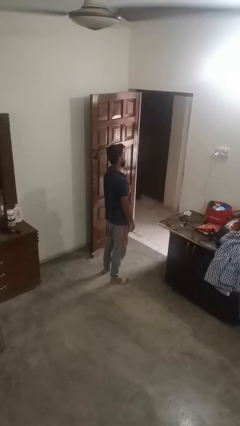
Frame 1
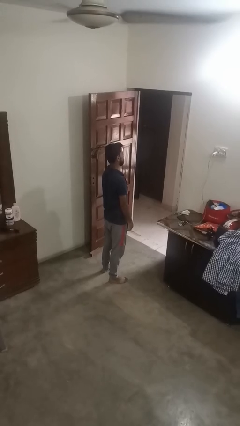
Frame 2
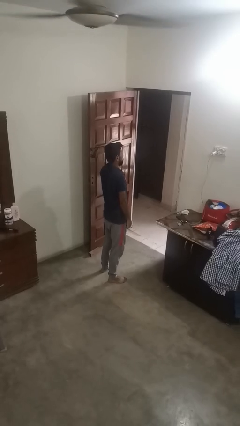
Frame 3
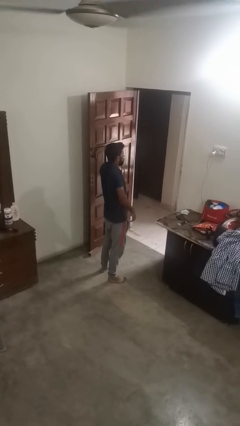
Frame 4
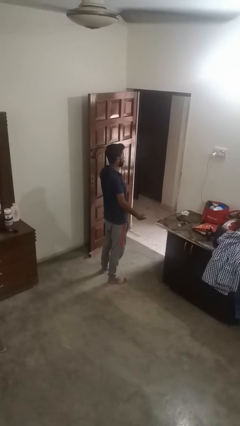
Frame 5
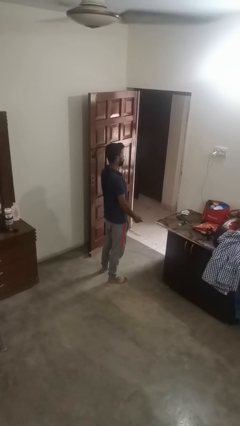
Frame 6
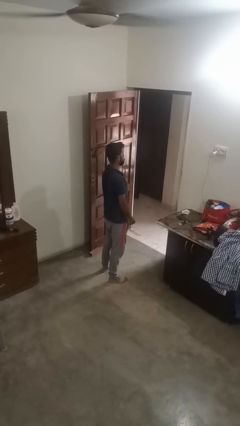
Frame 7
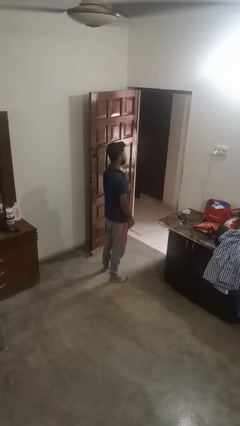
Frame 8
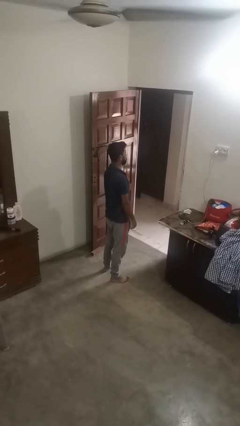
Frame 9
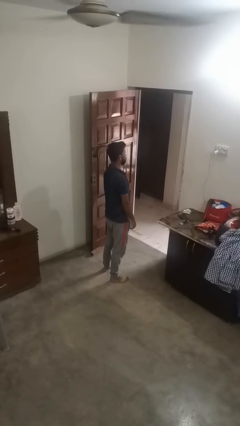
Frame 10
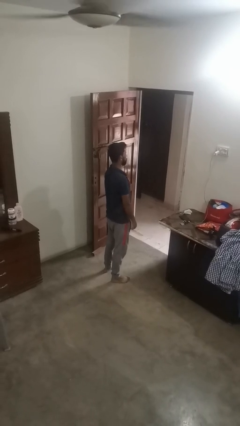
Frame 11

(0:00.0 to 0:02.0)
person shrugs

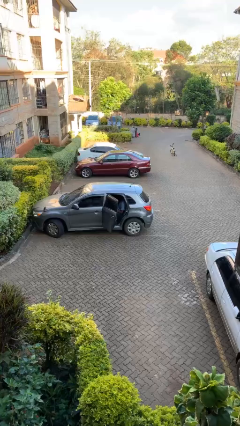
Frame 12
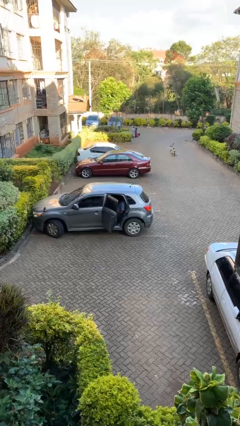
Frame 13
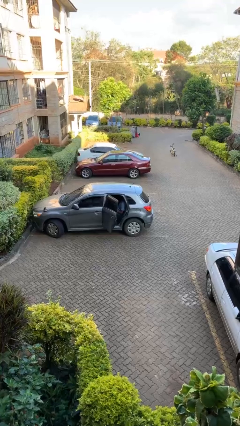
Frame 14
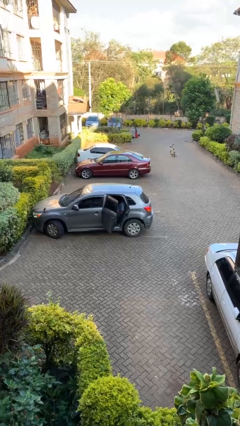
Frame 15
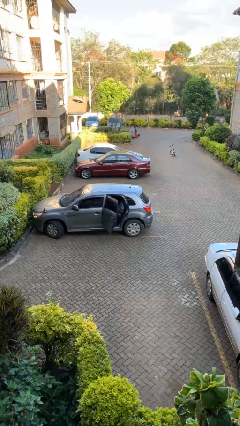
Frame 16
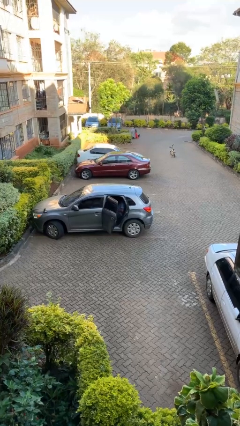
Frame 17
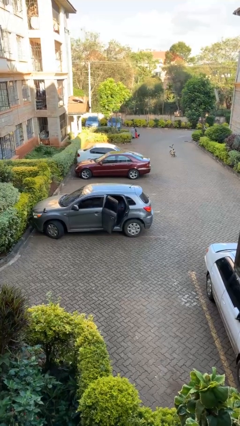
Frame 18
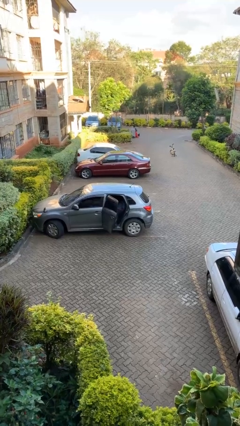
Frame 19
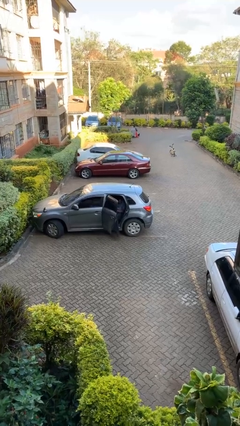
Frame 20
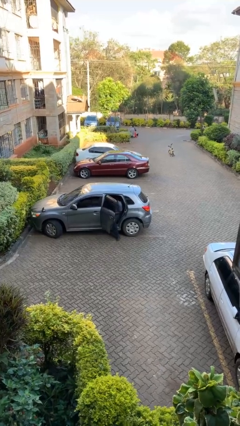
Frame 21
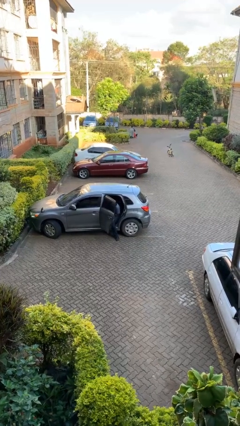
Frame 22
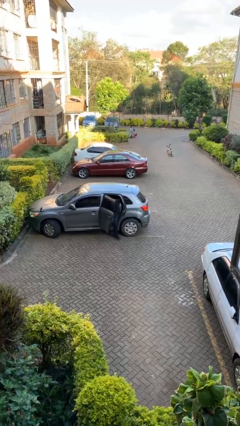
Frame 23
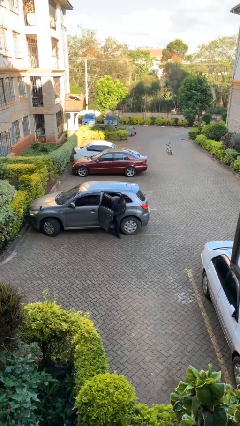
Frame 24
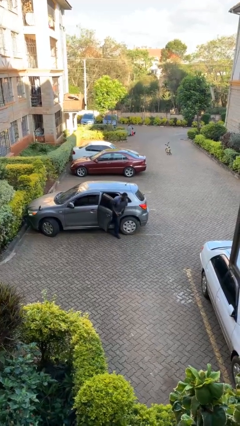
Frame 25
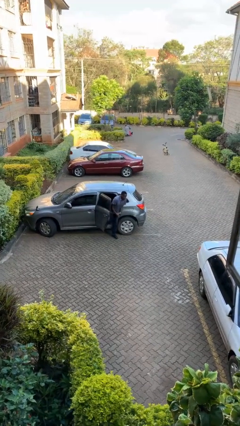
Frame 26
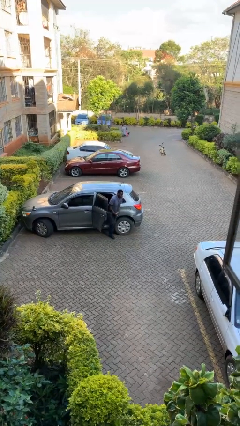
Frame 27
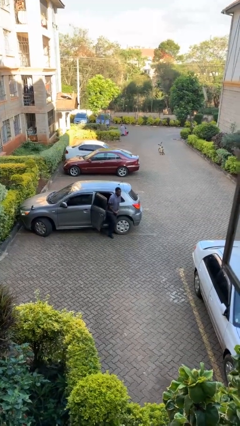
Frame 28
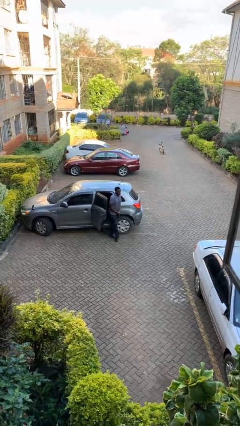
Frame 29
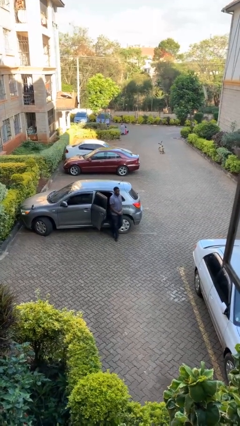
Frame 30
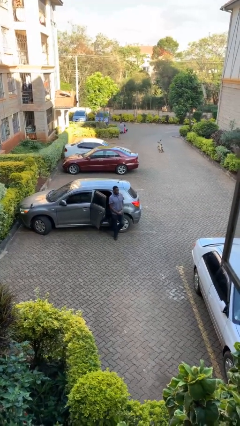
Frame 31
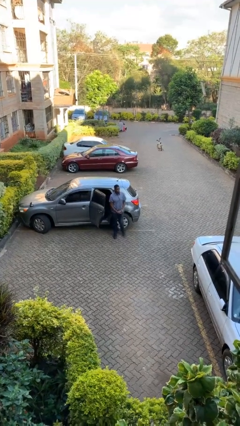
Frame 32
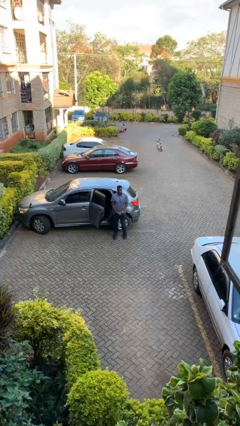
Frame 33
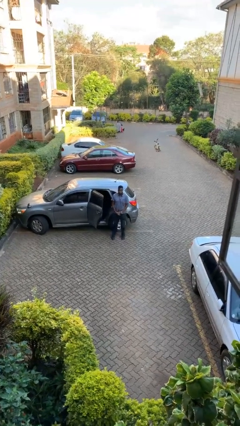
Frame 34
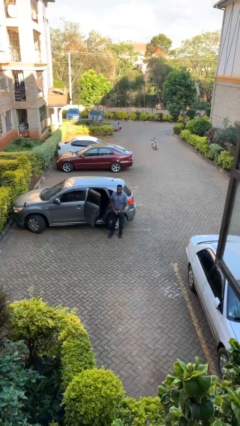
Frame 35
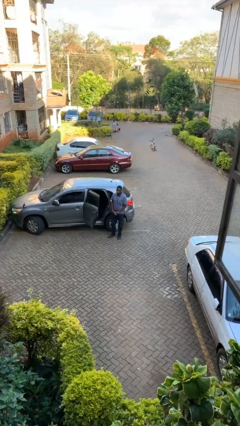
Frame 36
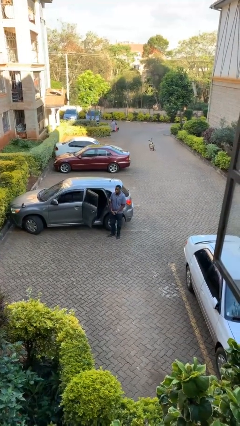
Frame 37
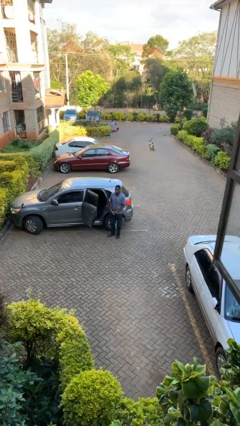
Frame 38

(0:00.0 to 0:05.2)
person exits car

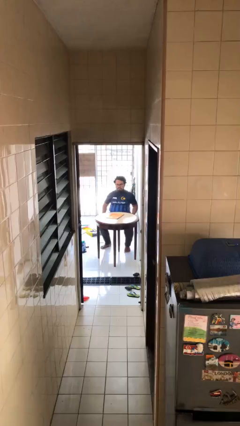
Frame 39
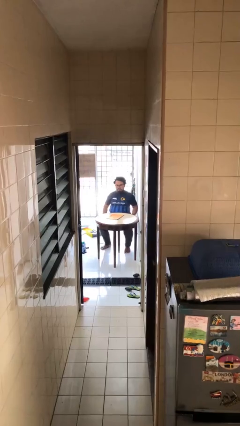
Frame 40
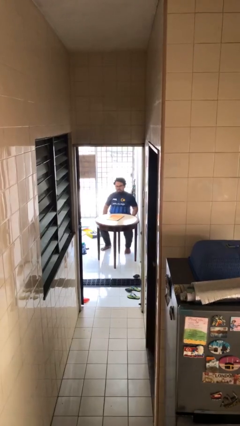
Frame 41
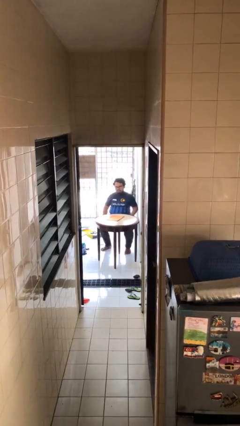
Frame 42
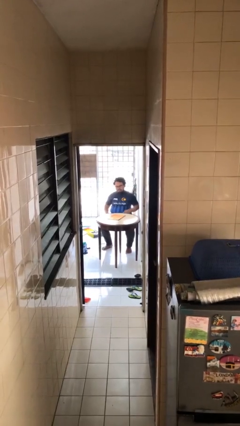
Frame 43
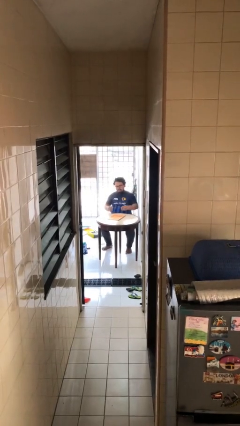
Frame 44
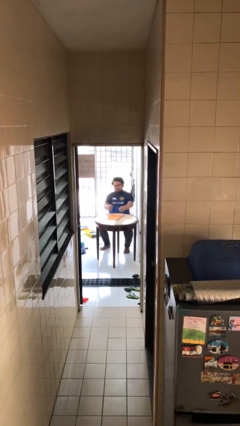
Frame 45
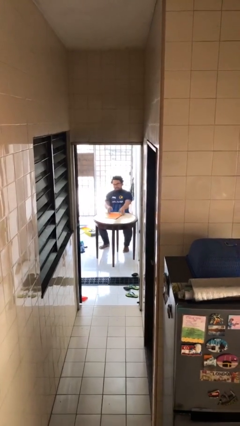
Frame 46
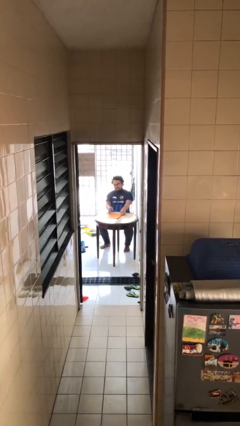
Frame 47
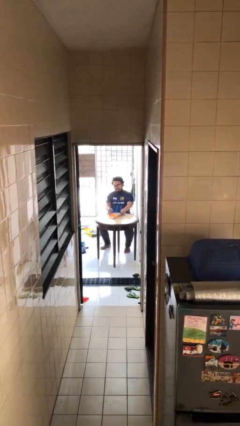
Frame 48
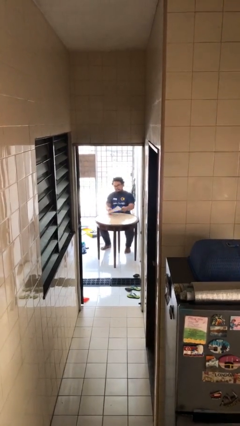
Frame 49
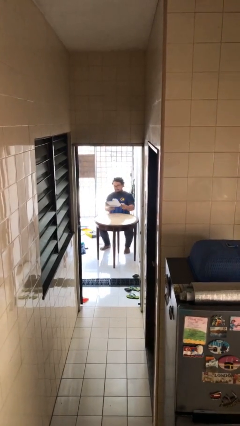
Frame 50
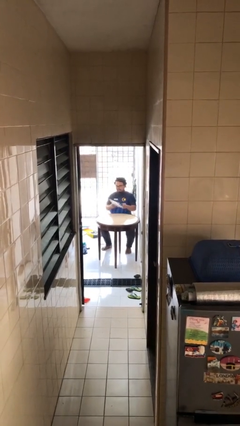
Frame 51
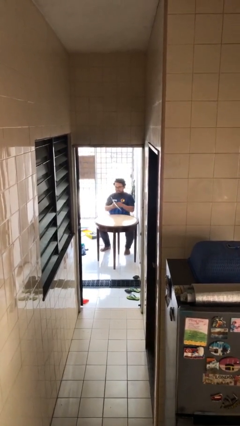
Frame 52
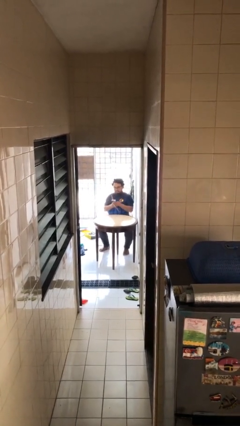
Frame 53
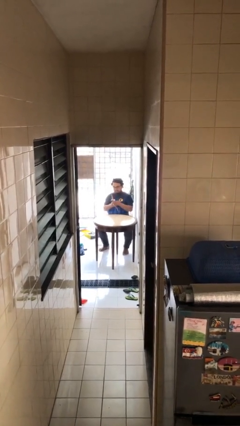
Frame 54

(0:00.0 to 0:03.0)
person picks up object from table

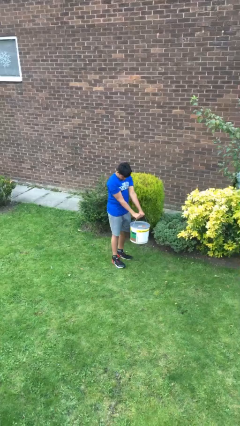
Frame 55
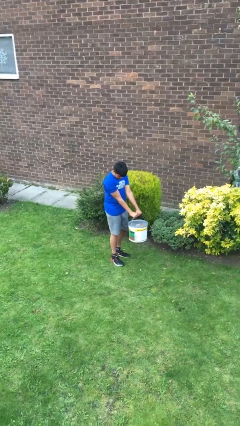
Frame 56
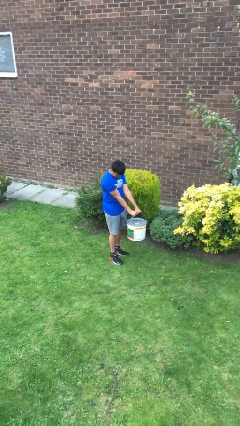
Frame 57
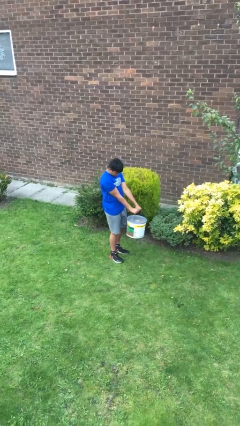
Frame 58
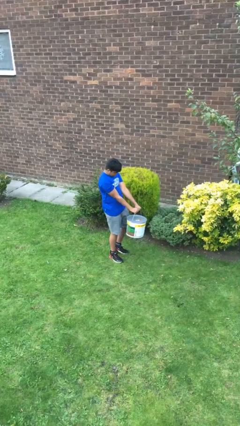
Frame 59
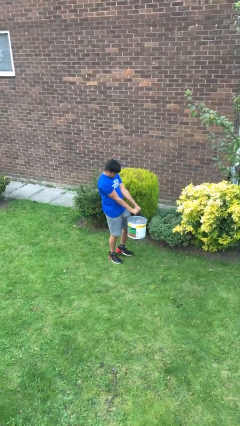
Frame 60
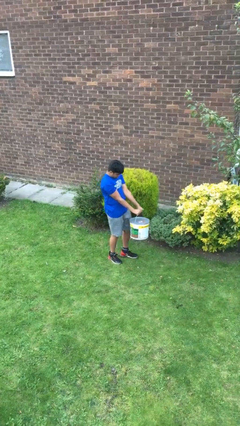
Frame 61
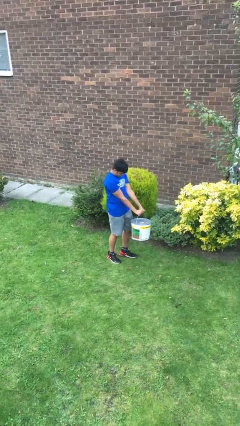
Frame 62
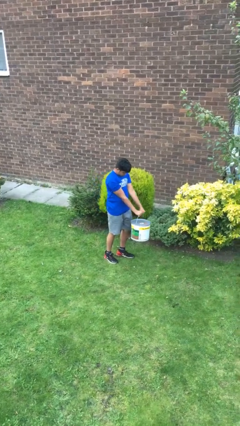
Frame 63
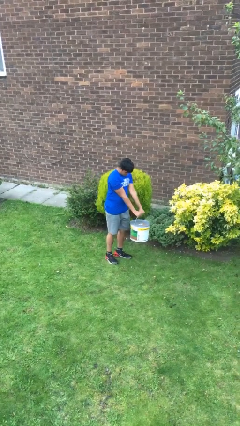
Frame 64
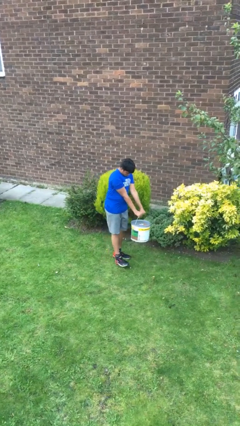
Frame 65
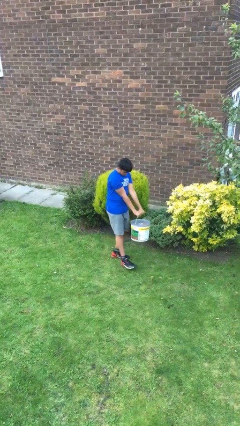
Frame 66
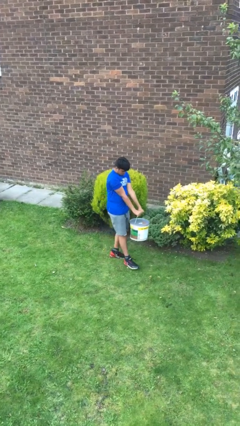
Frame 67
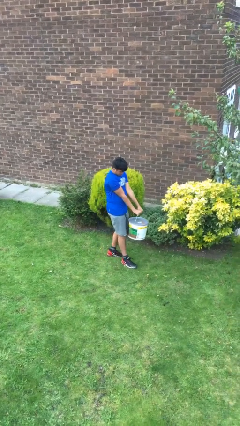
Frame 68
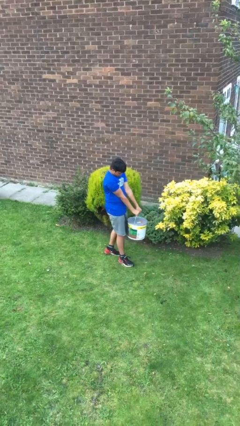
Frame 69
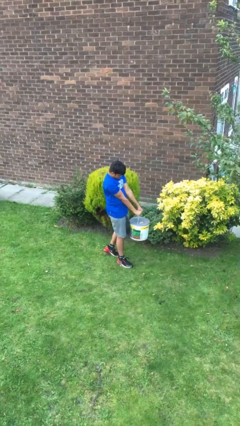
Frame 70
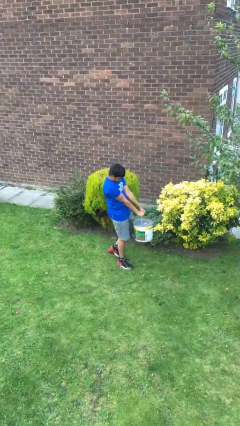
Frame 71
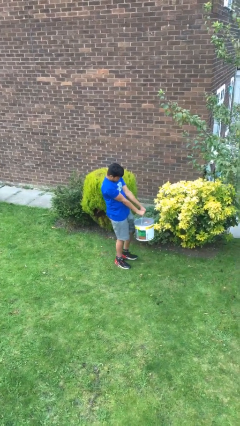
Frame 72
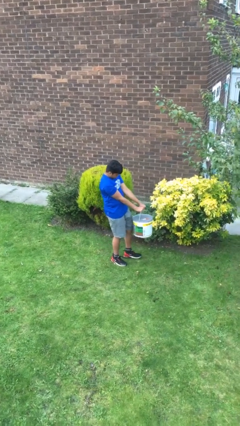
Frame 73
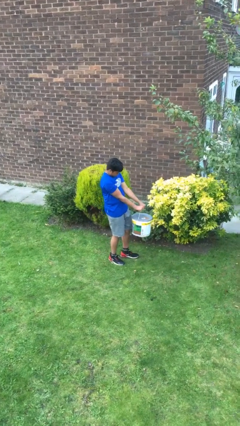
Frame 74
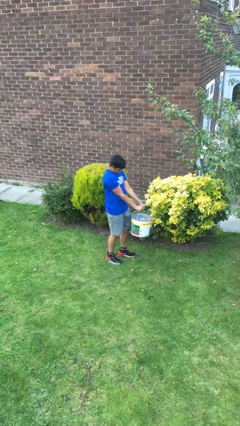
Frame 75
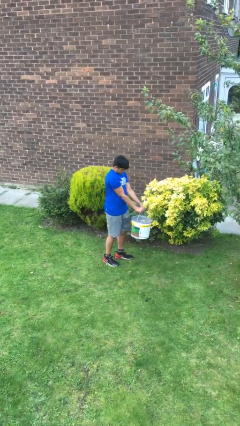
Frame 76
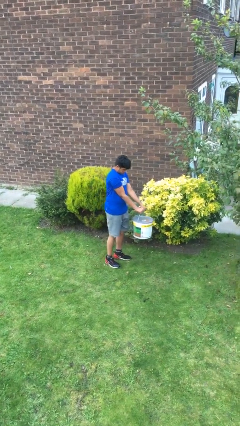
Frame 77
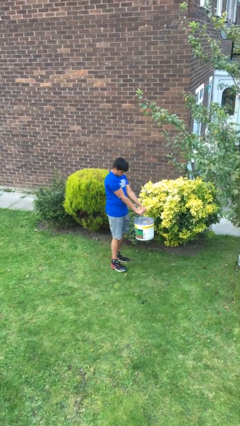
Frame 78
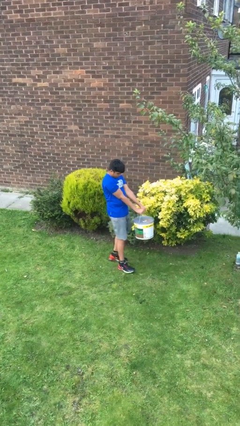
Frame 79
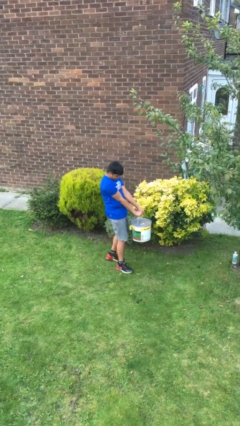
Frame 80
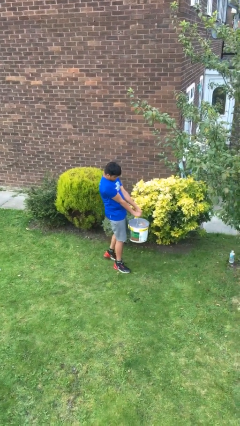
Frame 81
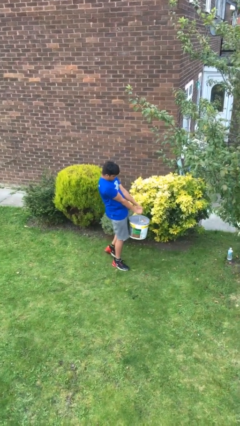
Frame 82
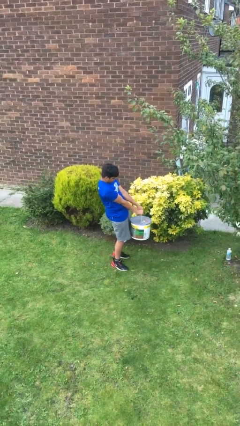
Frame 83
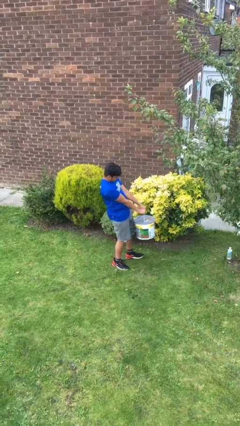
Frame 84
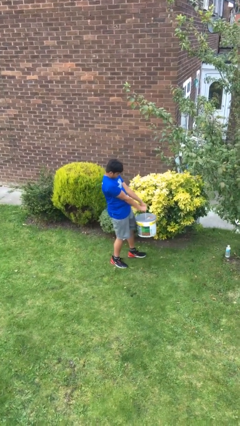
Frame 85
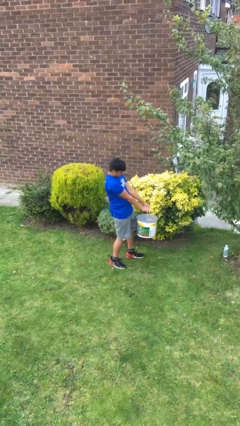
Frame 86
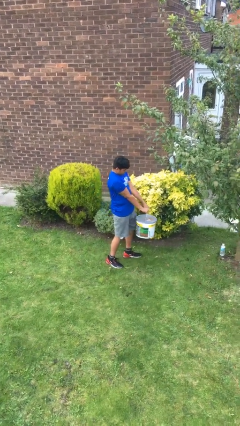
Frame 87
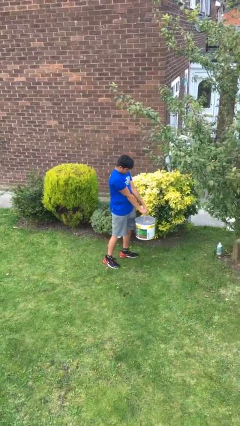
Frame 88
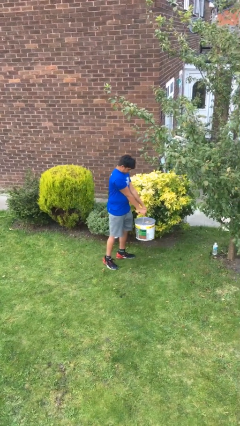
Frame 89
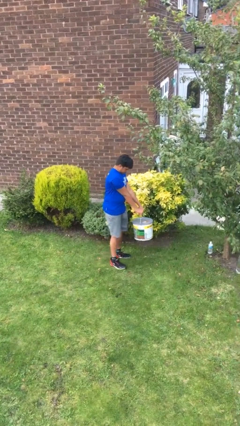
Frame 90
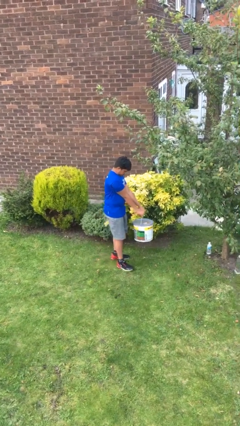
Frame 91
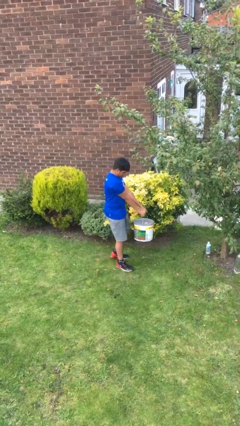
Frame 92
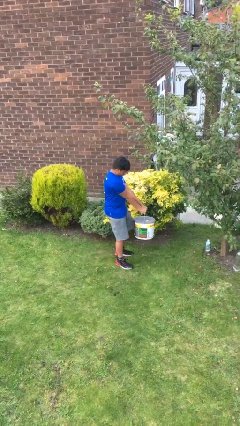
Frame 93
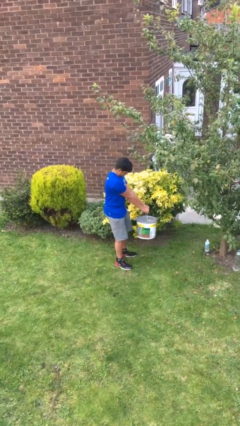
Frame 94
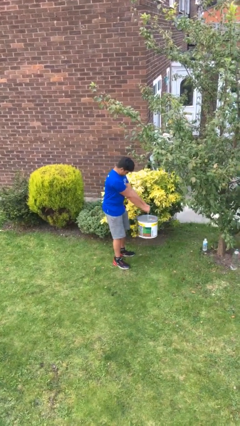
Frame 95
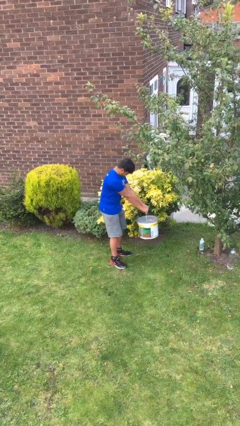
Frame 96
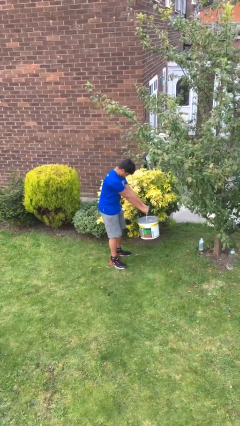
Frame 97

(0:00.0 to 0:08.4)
person carries heavy object
